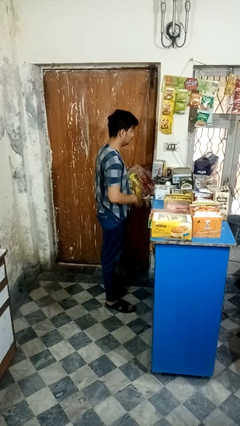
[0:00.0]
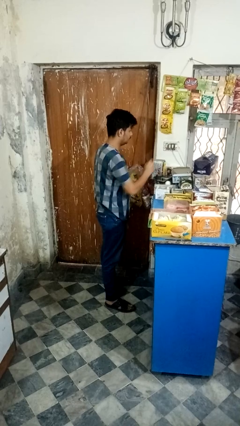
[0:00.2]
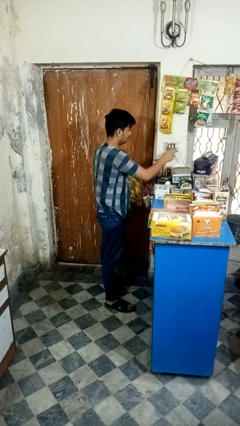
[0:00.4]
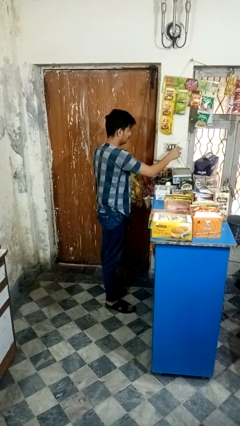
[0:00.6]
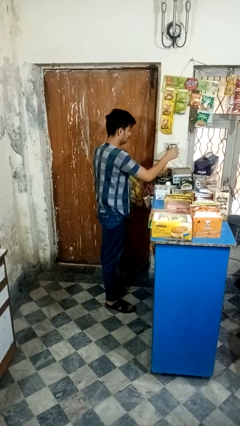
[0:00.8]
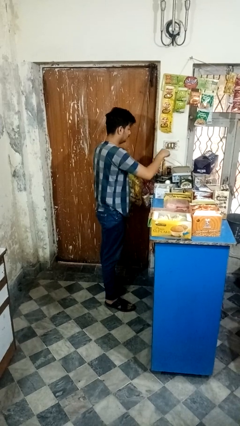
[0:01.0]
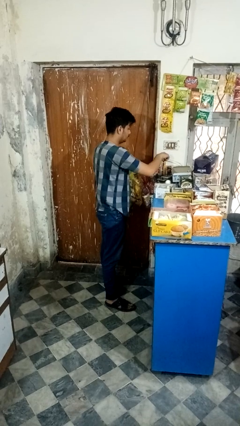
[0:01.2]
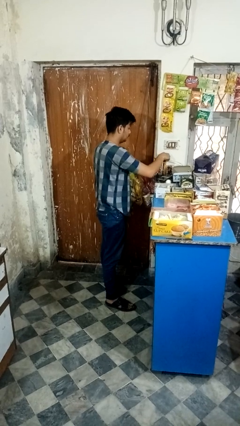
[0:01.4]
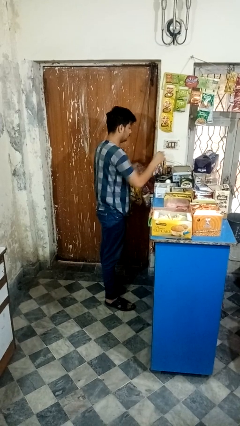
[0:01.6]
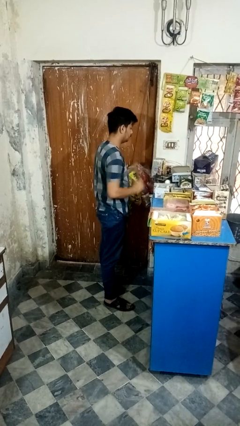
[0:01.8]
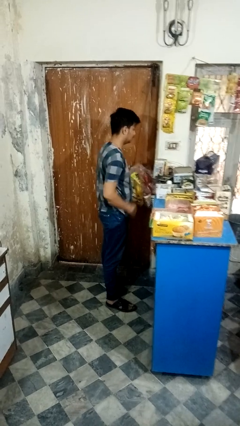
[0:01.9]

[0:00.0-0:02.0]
person unplugs from electrical socket

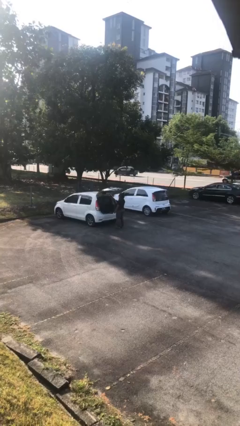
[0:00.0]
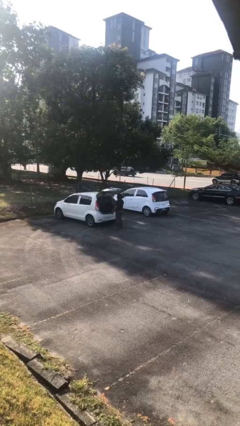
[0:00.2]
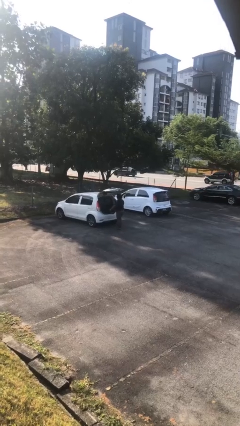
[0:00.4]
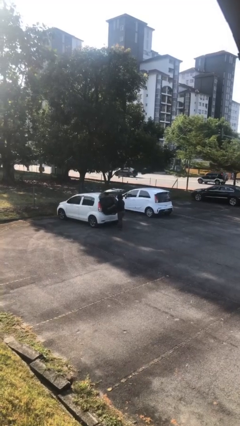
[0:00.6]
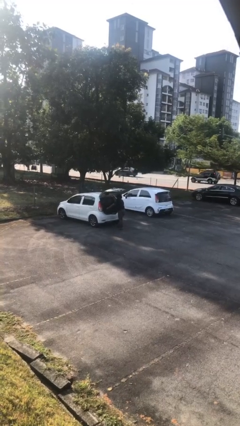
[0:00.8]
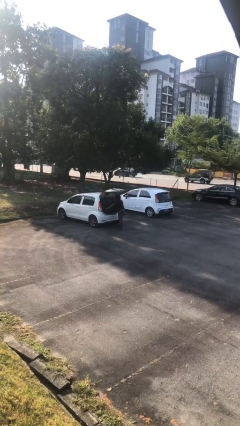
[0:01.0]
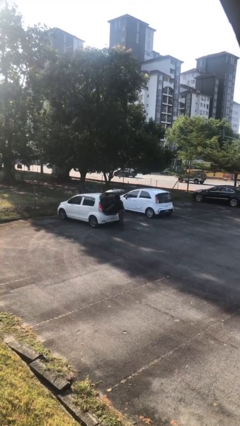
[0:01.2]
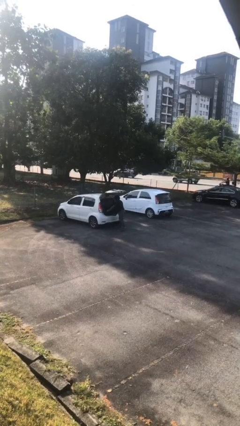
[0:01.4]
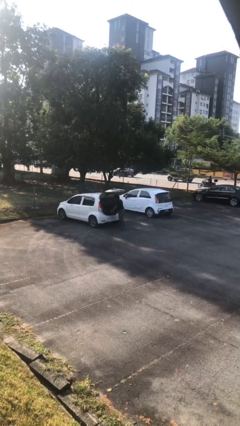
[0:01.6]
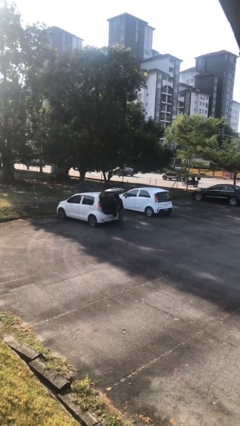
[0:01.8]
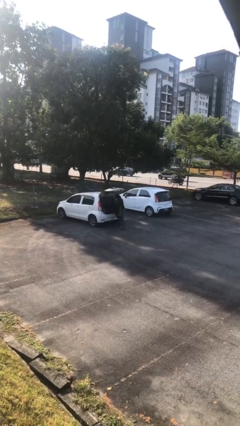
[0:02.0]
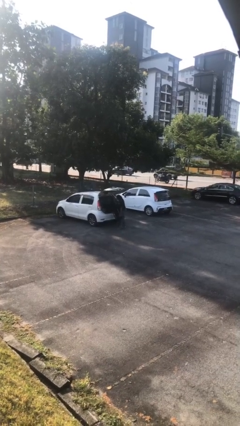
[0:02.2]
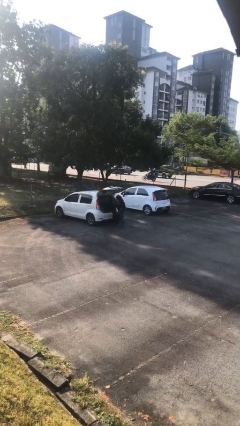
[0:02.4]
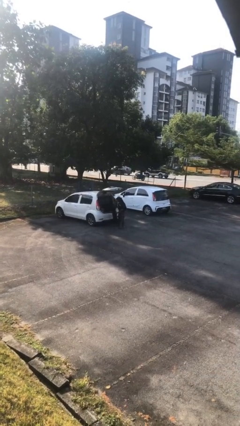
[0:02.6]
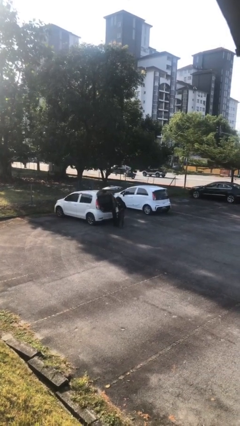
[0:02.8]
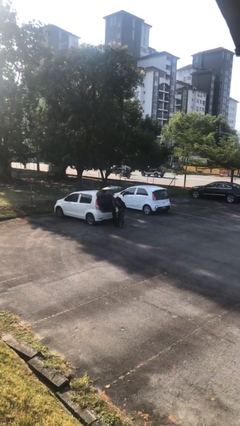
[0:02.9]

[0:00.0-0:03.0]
person unloads car

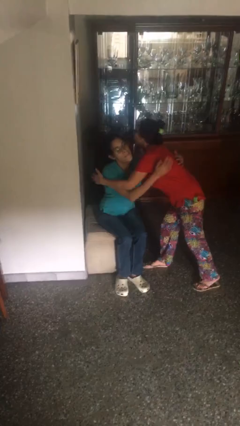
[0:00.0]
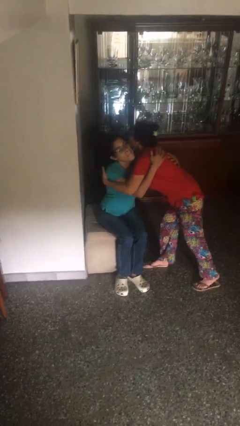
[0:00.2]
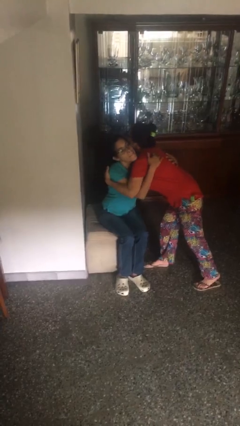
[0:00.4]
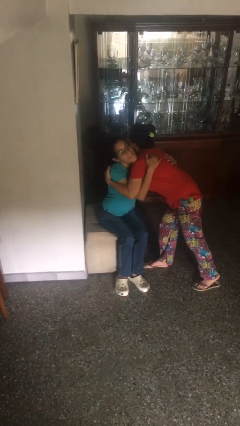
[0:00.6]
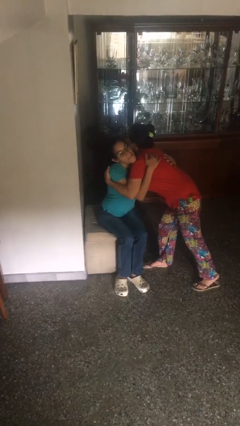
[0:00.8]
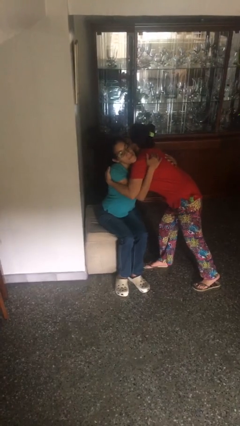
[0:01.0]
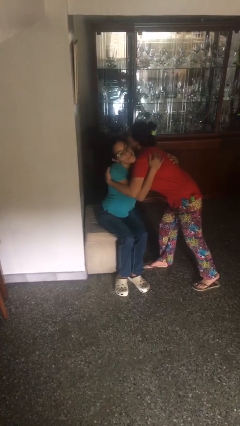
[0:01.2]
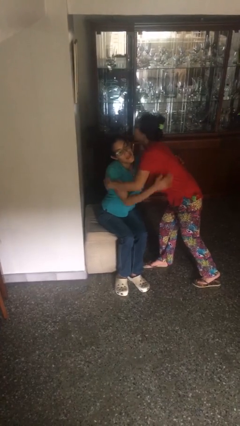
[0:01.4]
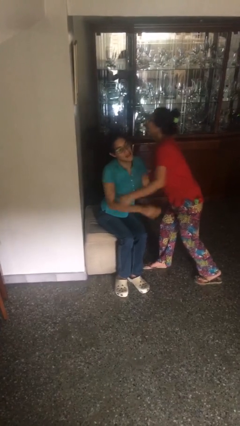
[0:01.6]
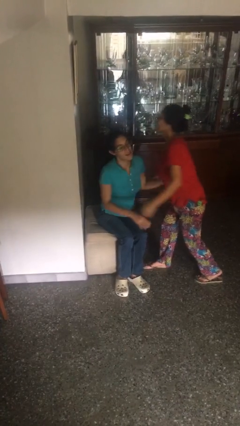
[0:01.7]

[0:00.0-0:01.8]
person embraces person

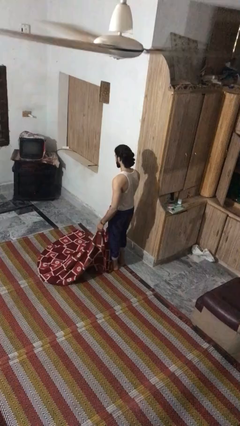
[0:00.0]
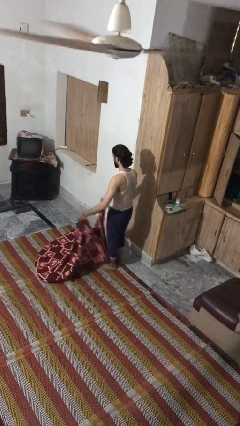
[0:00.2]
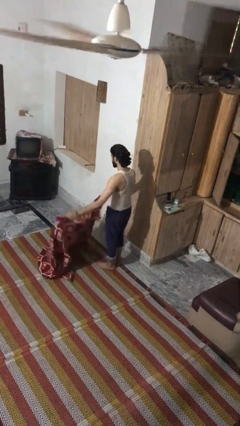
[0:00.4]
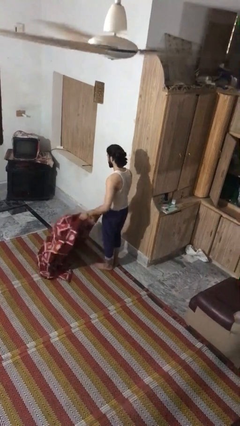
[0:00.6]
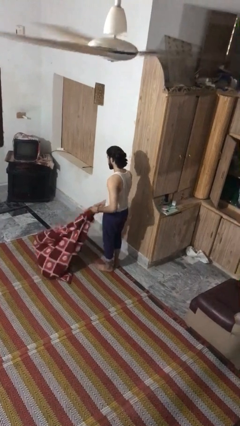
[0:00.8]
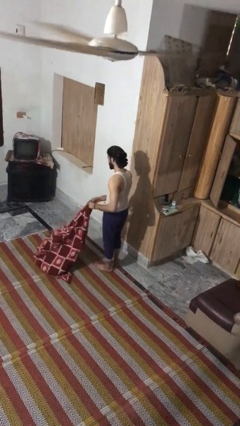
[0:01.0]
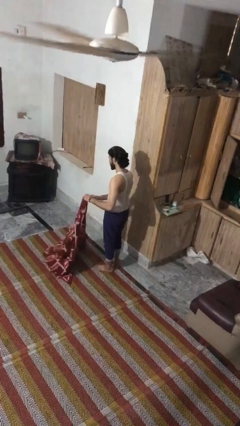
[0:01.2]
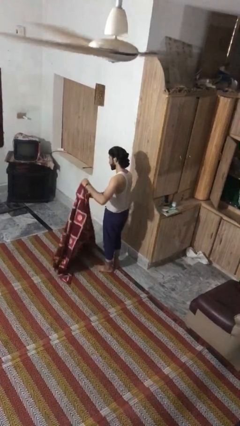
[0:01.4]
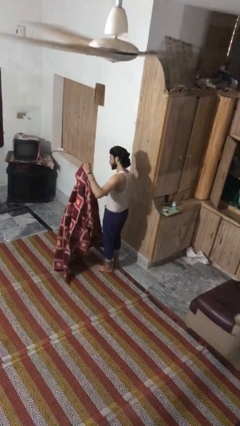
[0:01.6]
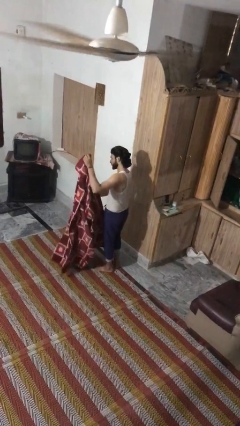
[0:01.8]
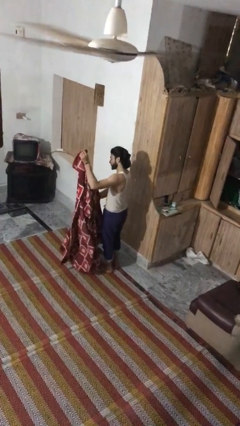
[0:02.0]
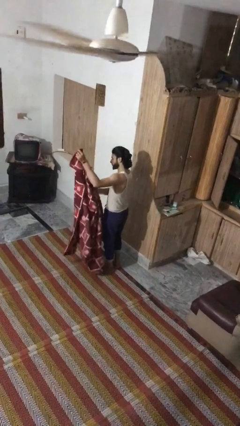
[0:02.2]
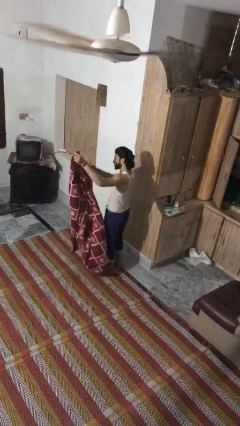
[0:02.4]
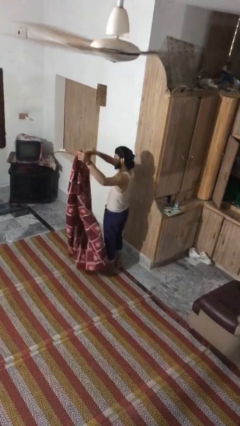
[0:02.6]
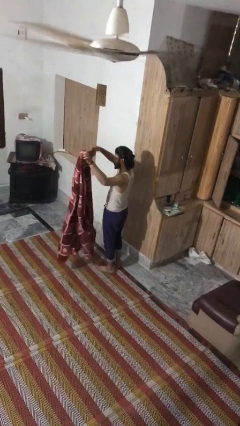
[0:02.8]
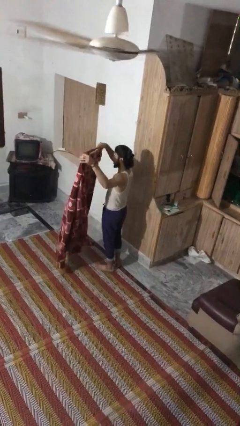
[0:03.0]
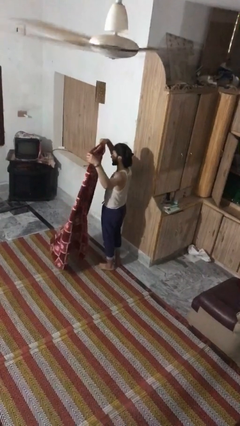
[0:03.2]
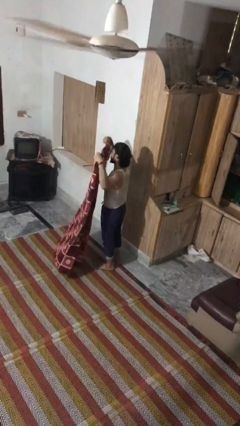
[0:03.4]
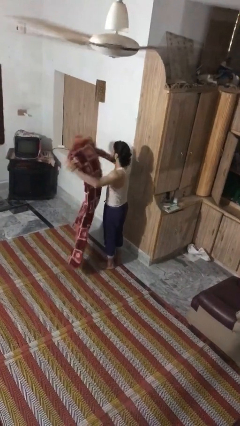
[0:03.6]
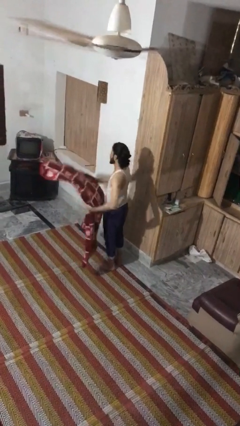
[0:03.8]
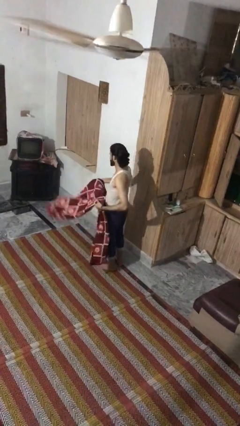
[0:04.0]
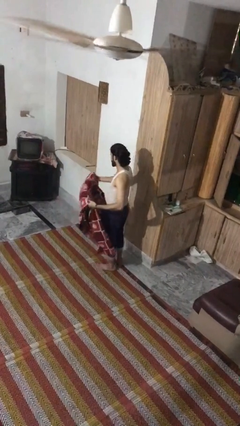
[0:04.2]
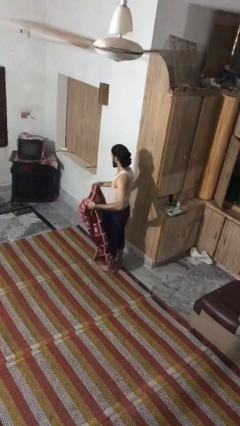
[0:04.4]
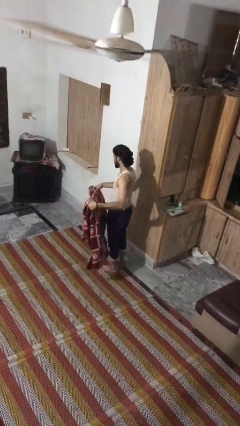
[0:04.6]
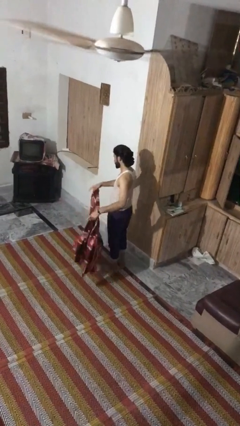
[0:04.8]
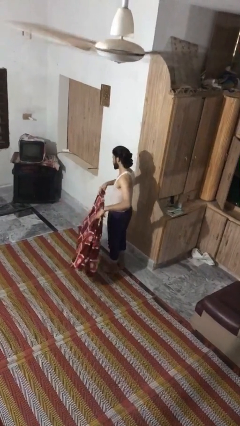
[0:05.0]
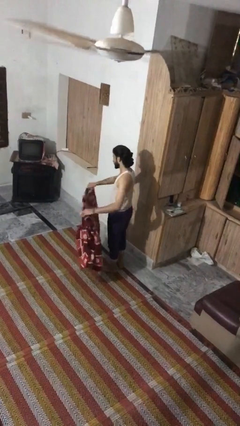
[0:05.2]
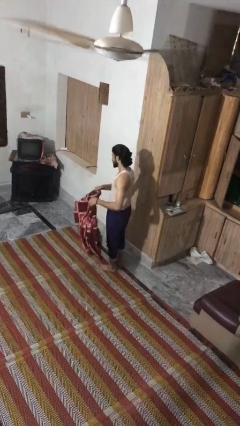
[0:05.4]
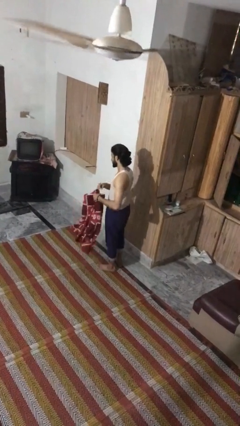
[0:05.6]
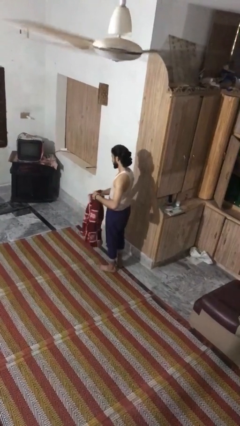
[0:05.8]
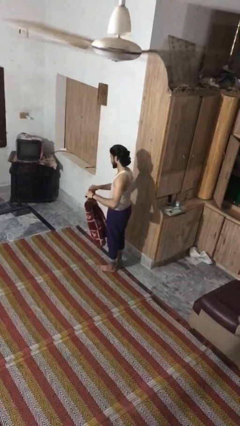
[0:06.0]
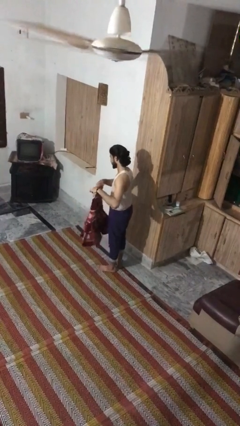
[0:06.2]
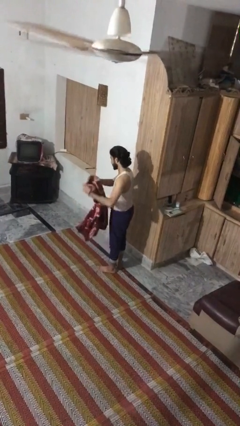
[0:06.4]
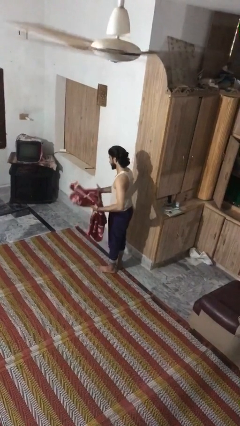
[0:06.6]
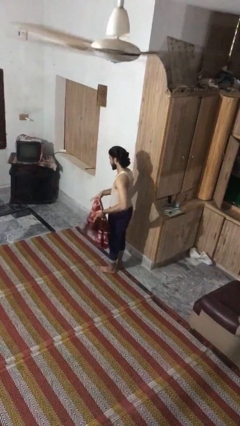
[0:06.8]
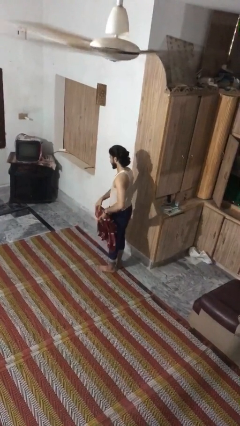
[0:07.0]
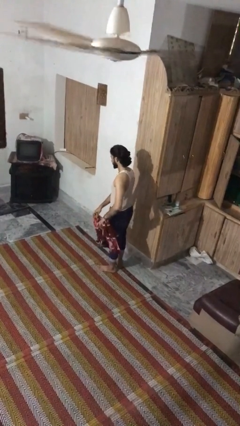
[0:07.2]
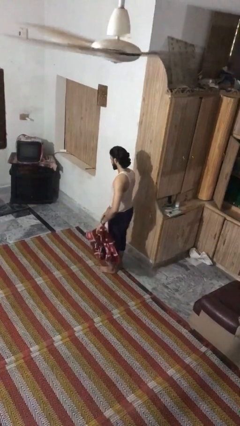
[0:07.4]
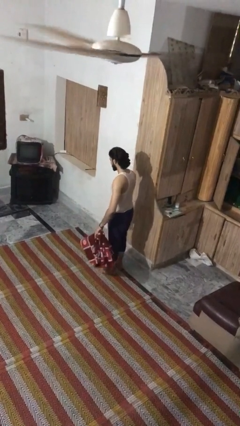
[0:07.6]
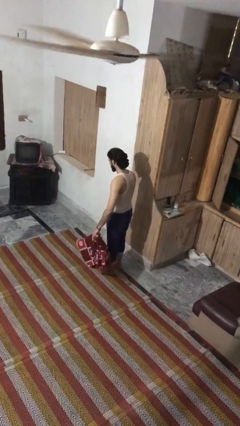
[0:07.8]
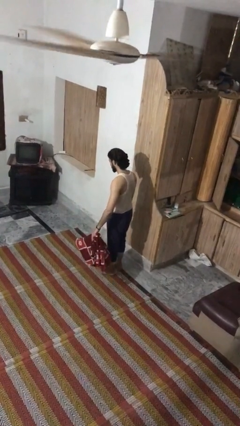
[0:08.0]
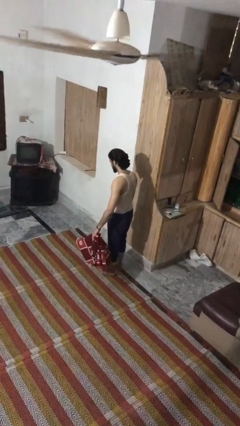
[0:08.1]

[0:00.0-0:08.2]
person folds blanket

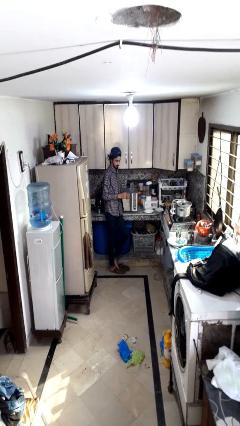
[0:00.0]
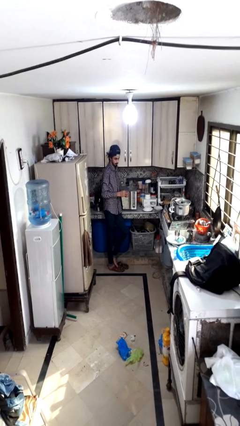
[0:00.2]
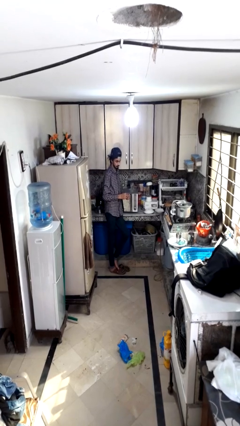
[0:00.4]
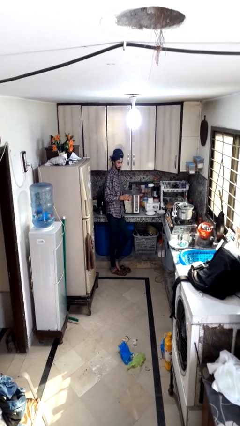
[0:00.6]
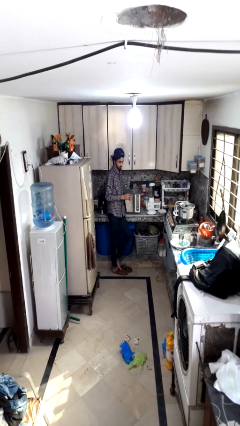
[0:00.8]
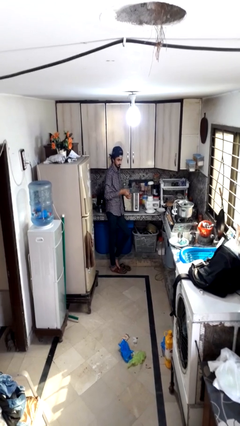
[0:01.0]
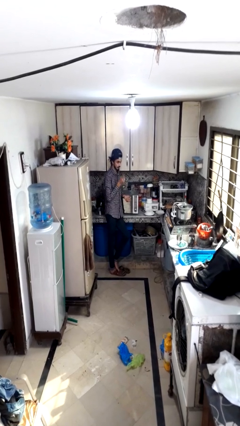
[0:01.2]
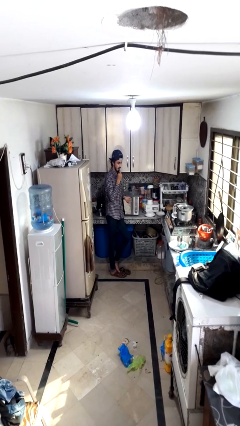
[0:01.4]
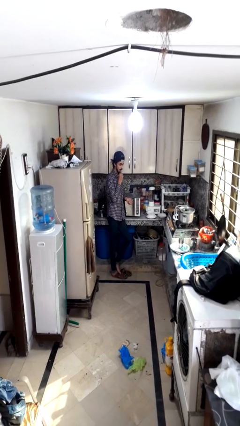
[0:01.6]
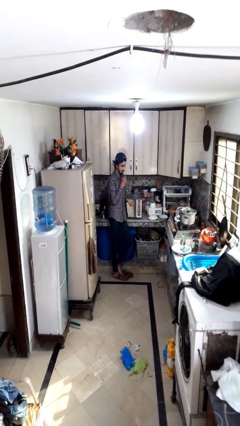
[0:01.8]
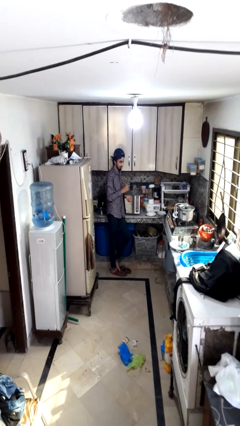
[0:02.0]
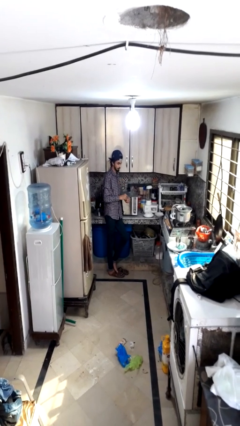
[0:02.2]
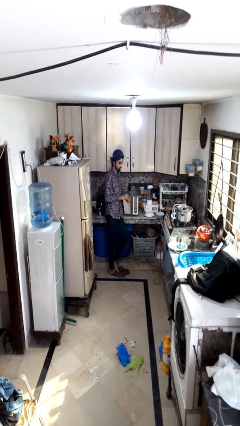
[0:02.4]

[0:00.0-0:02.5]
person takes medicine pills
